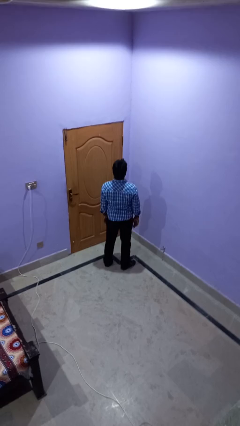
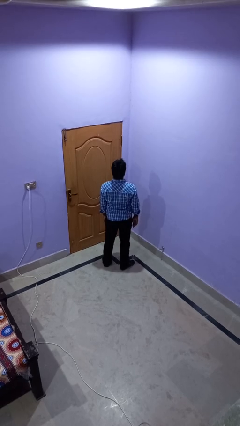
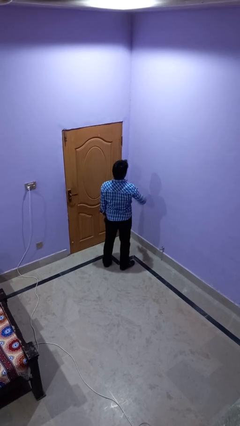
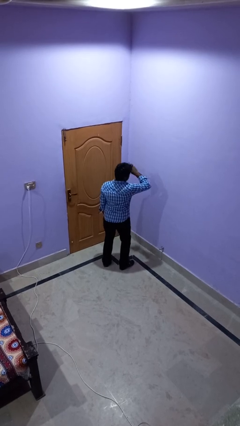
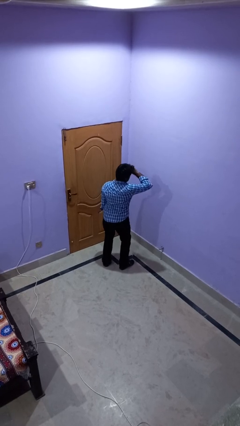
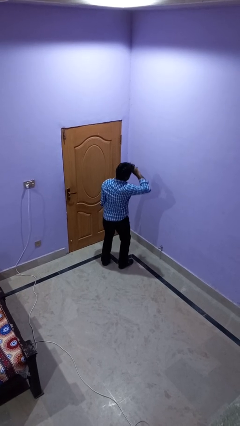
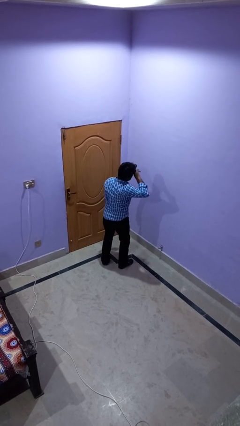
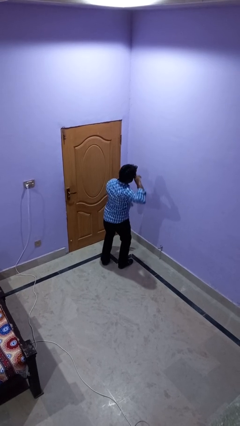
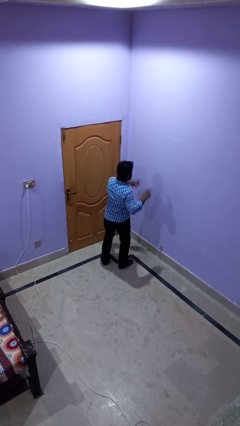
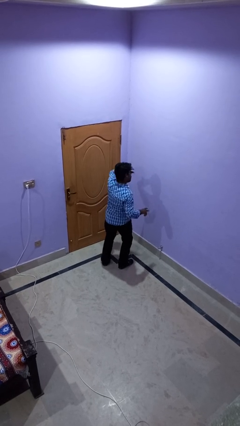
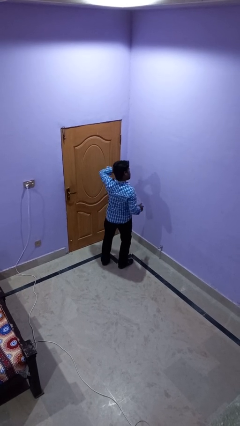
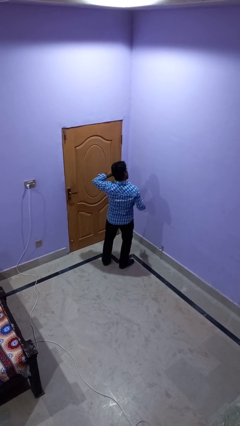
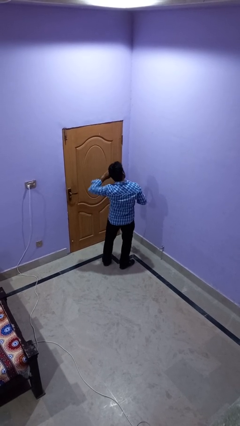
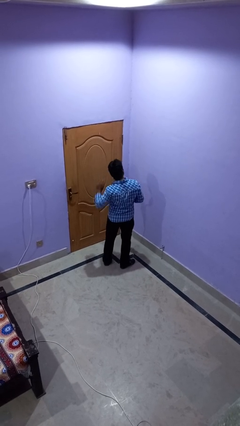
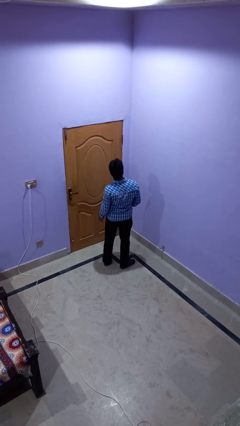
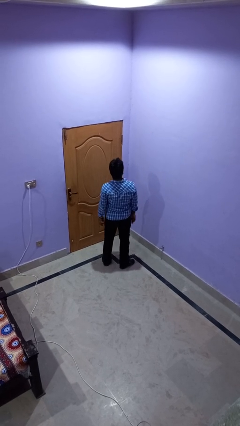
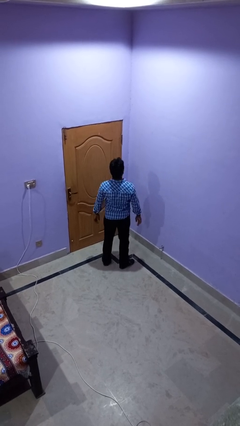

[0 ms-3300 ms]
person dances in place

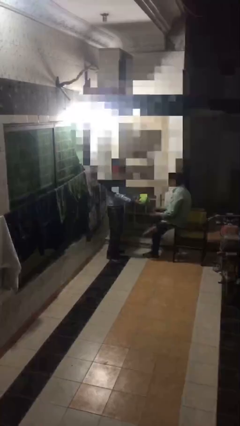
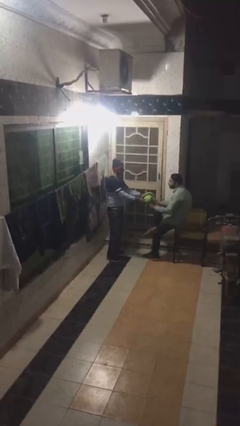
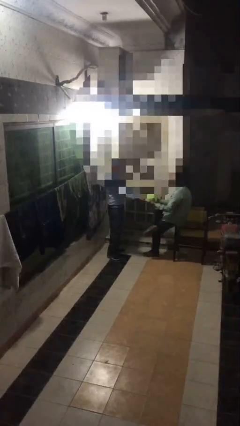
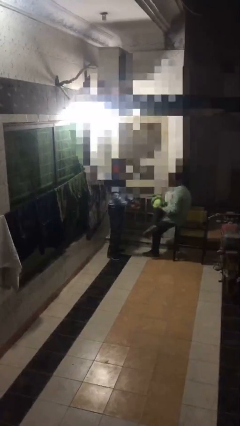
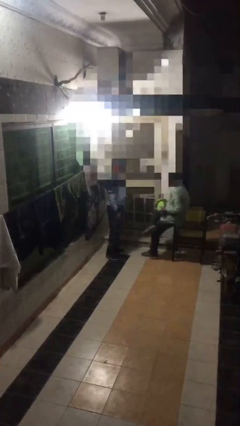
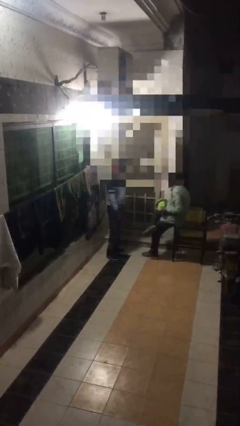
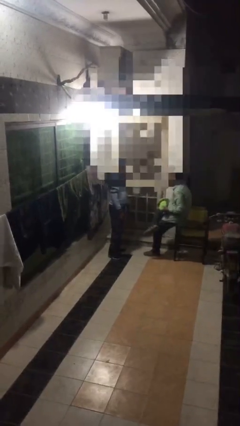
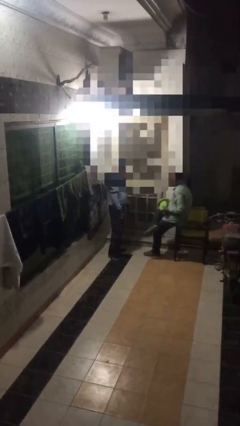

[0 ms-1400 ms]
person transfers object to person

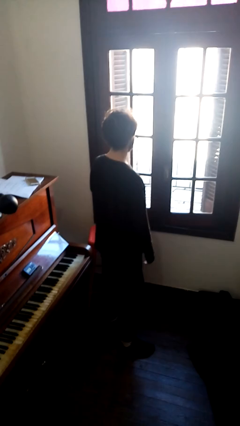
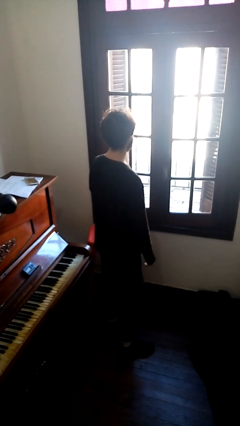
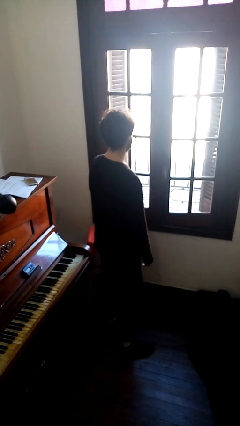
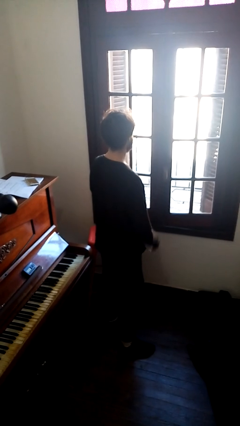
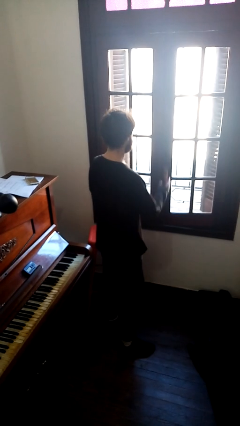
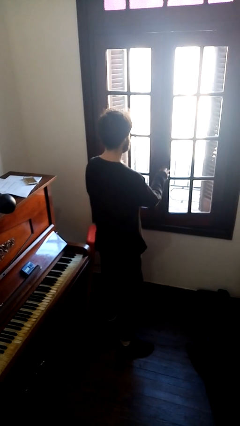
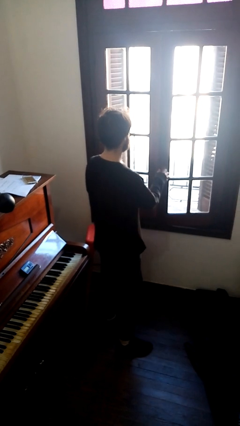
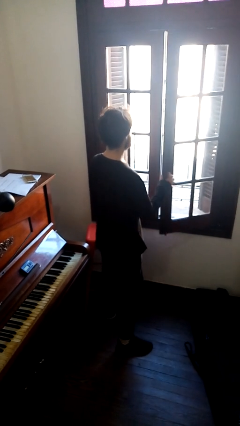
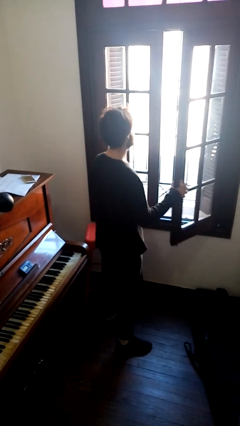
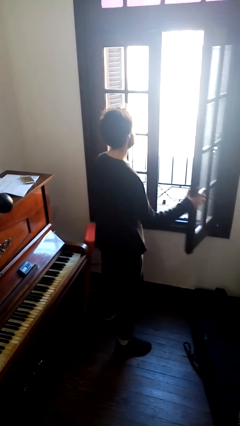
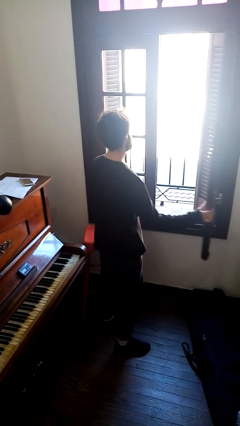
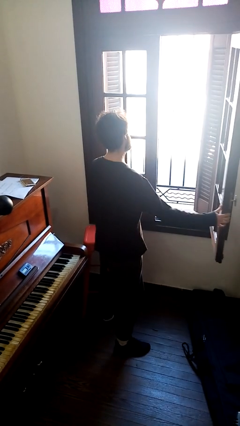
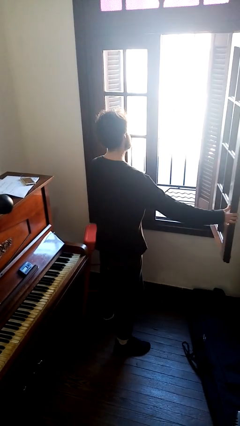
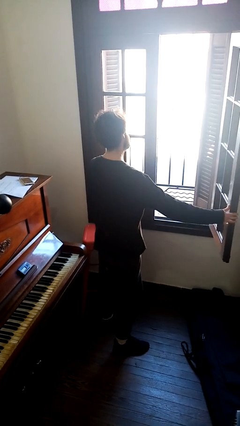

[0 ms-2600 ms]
person opens home window

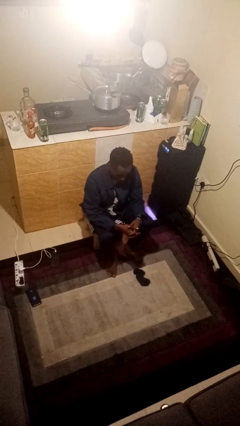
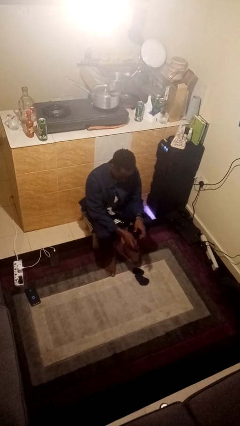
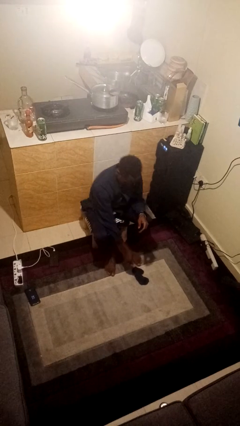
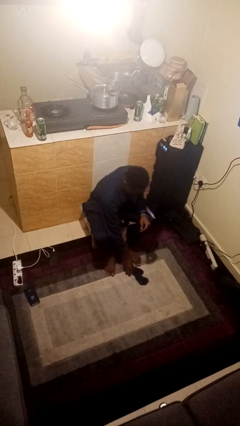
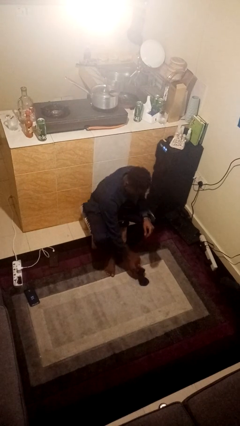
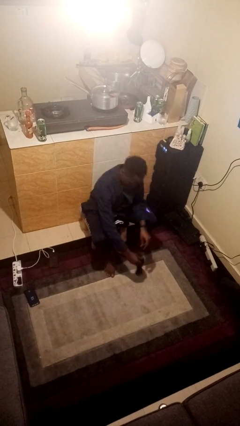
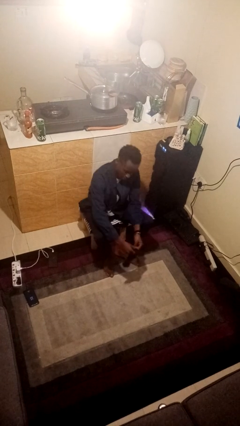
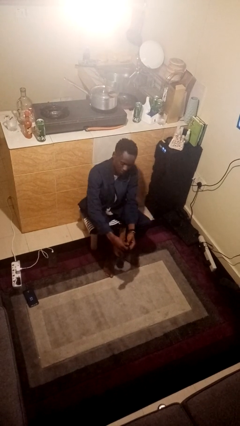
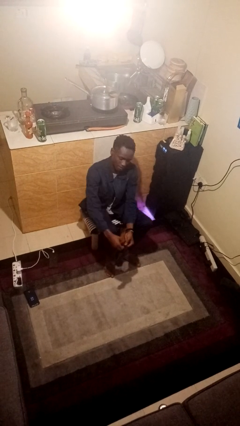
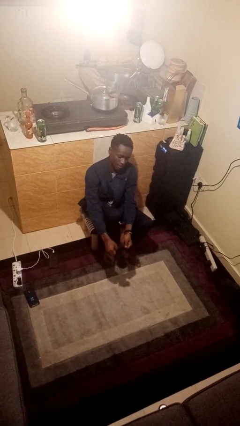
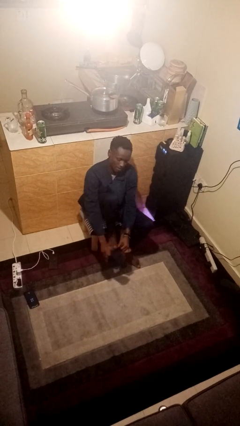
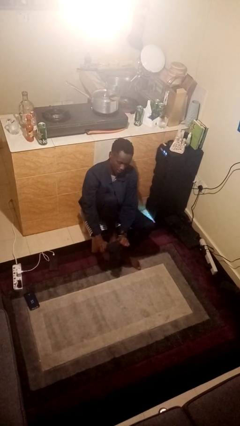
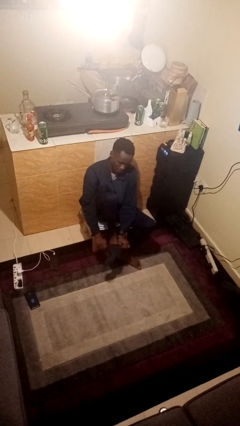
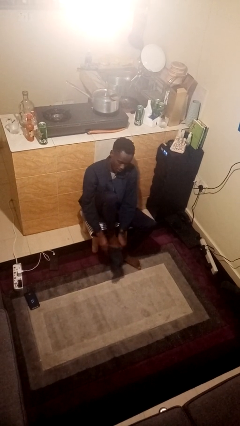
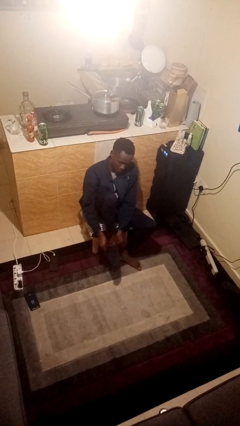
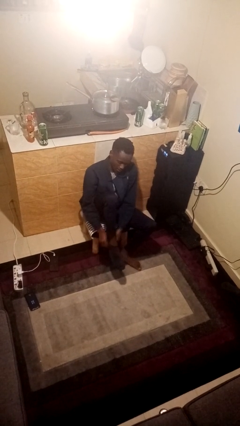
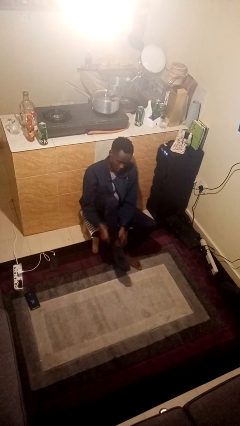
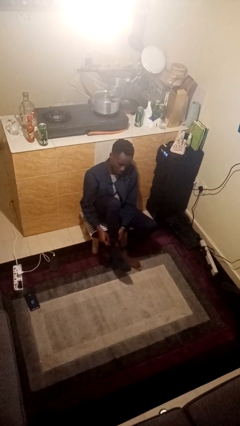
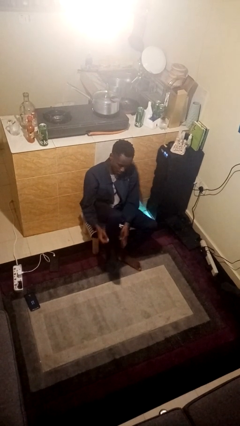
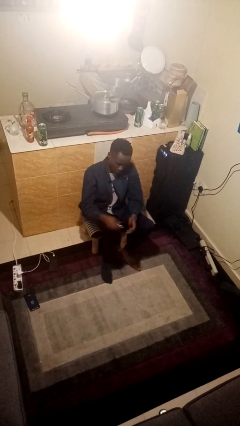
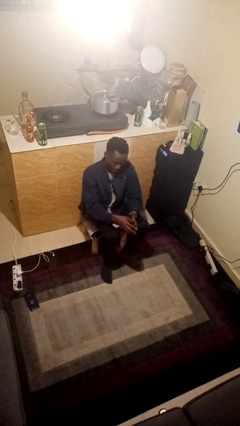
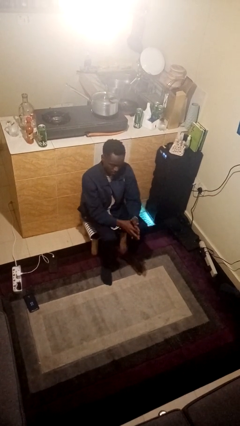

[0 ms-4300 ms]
person puts on socks

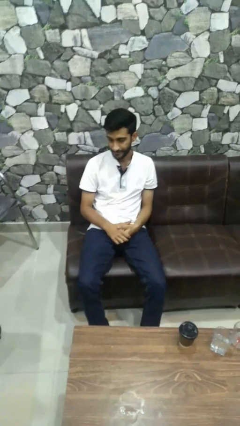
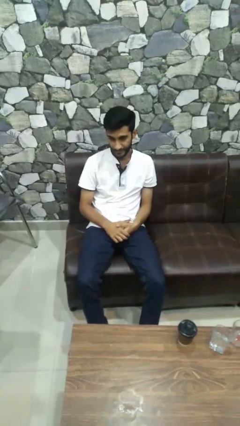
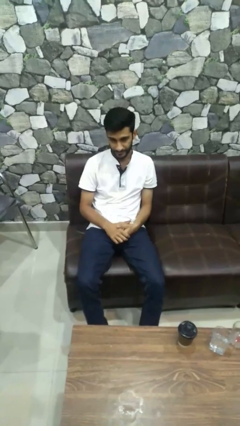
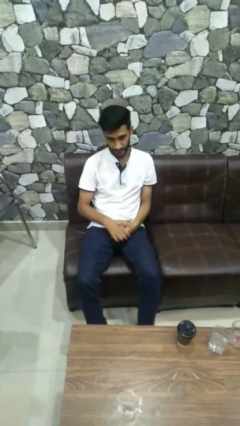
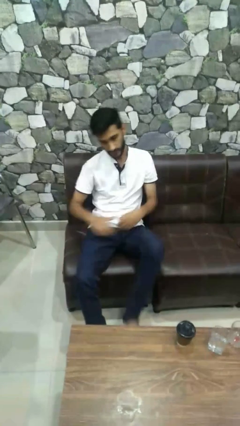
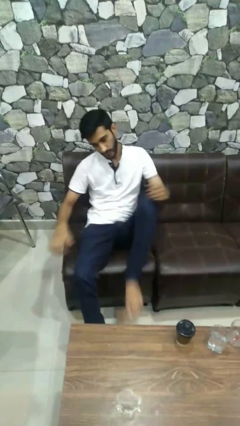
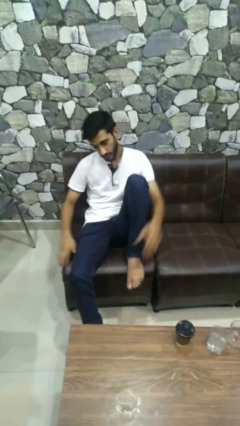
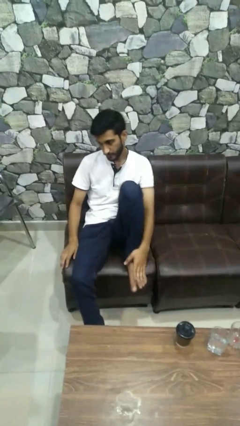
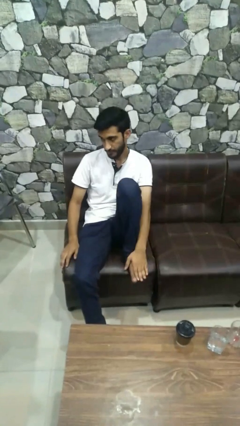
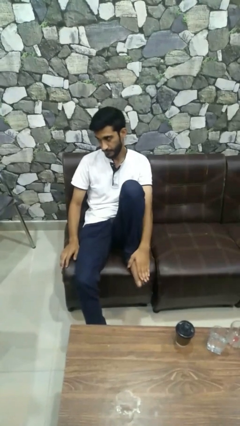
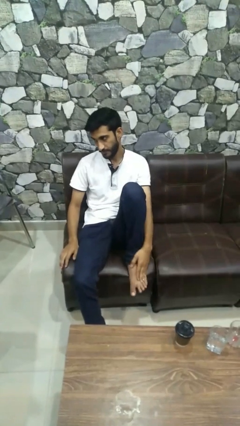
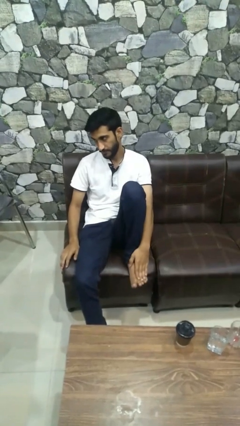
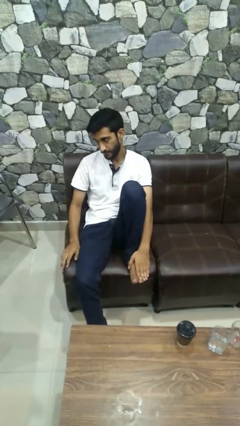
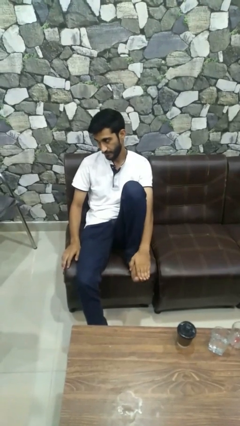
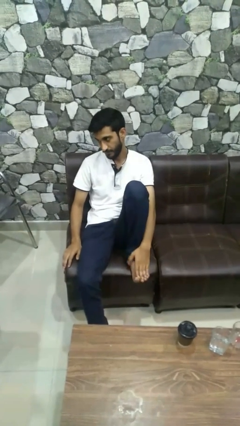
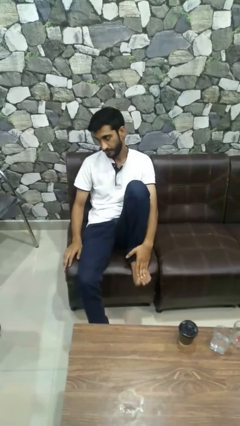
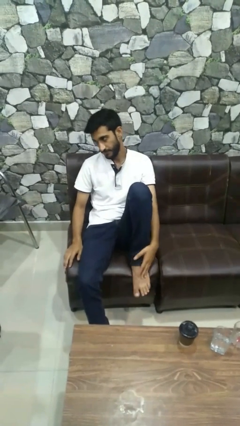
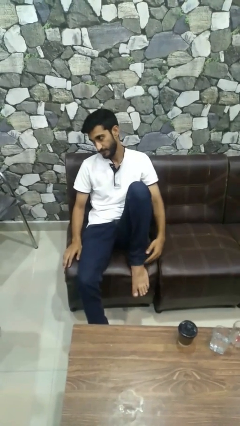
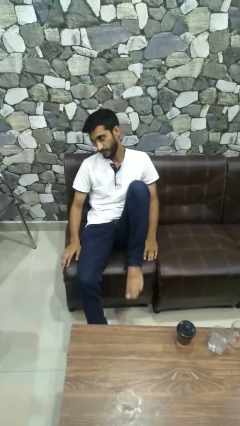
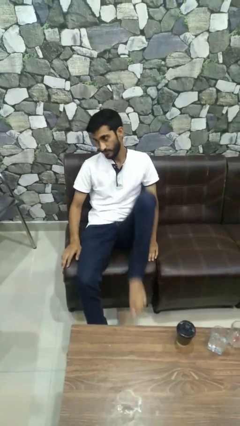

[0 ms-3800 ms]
person rubs foot

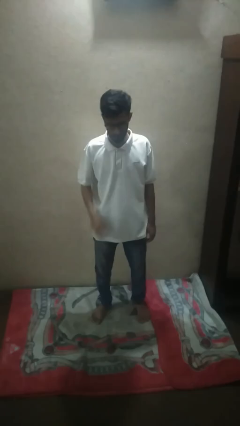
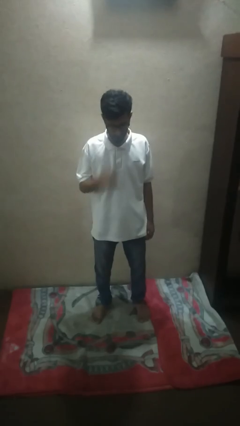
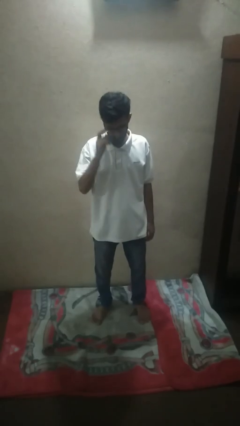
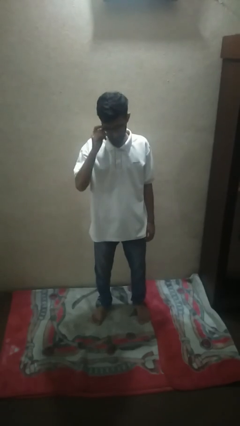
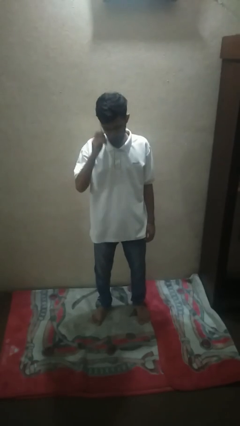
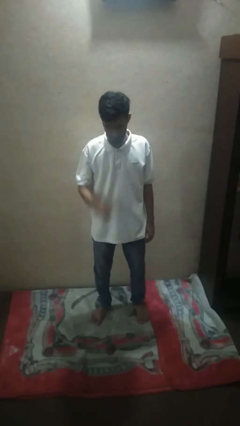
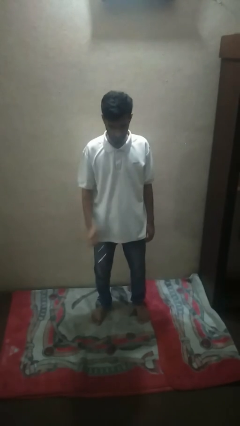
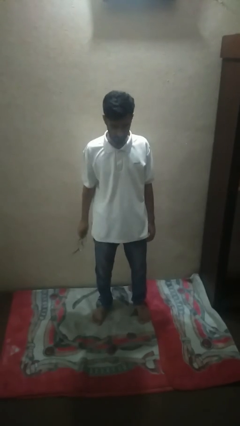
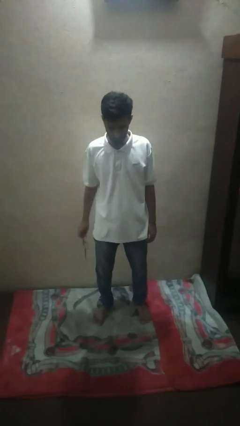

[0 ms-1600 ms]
person takes off glasses

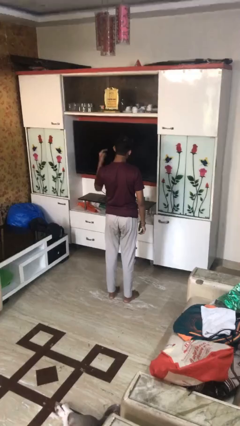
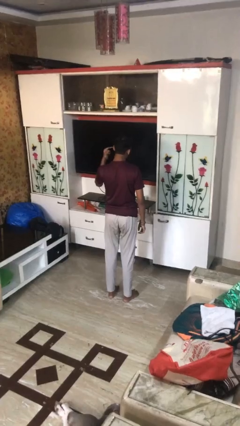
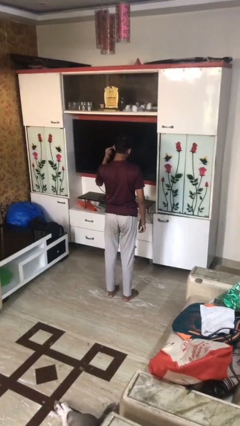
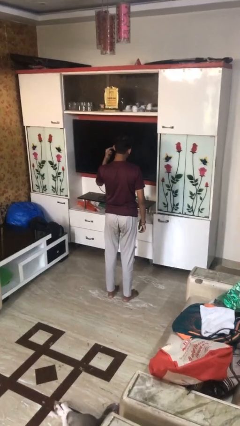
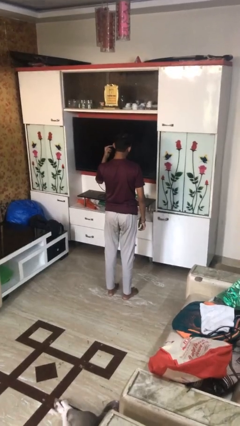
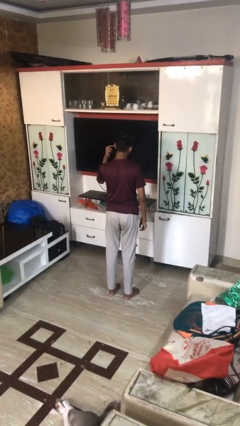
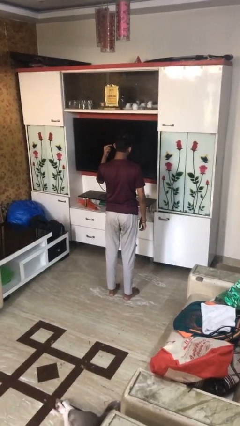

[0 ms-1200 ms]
person gestures listen closely
